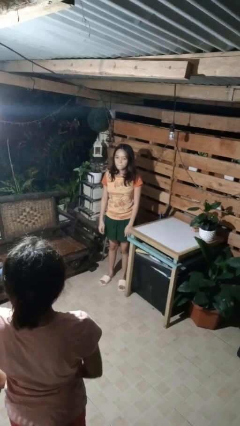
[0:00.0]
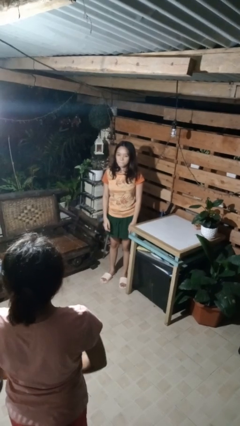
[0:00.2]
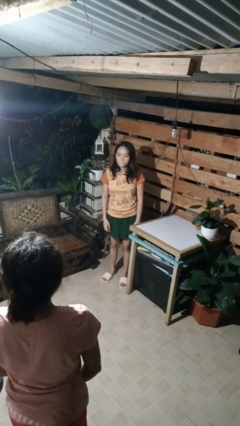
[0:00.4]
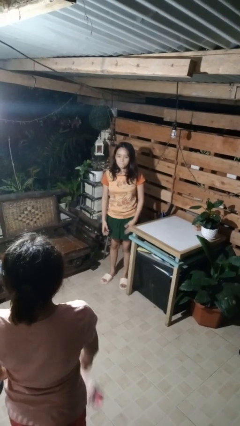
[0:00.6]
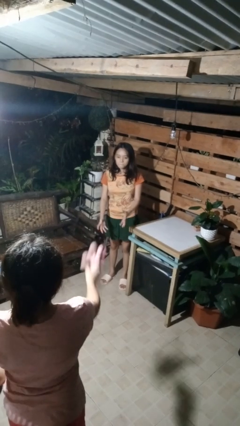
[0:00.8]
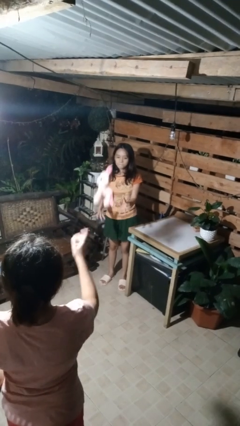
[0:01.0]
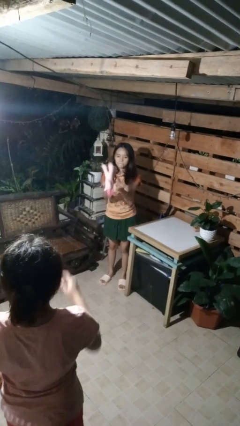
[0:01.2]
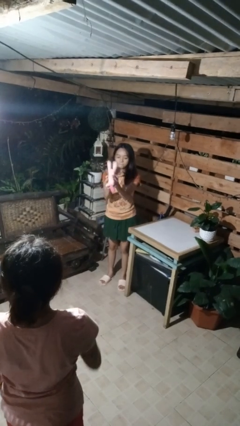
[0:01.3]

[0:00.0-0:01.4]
person catches object from person

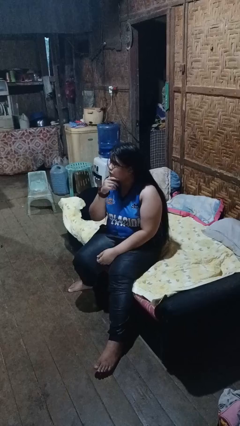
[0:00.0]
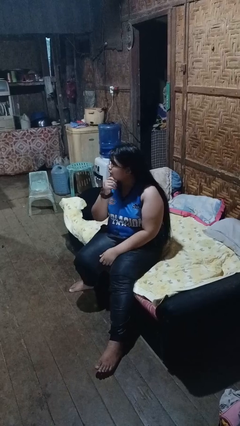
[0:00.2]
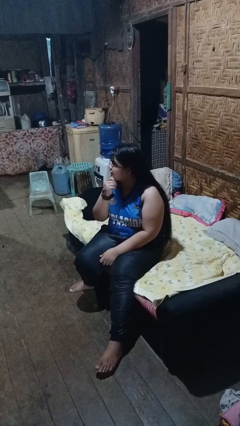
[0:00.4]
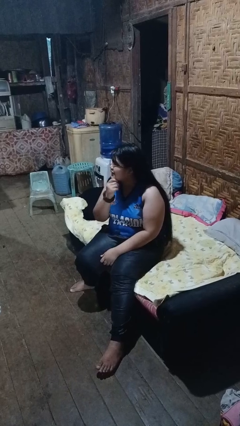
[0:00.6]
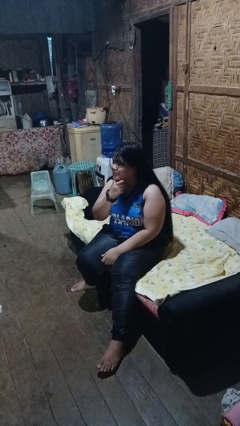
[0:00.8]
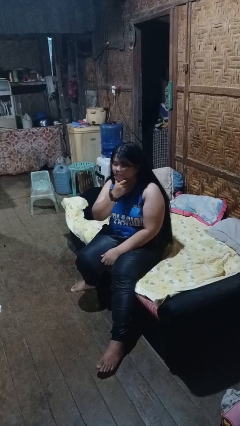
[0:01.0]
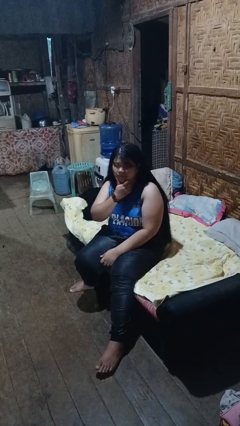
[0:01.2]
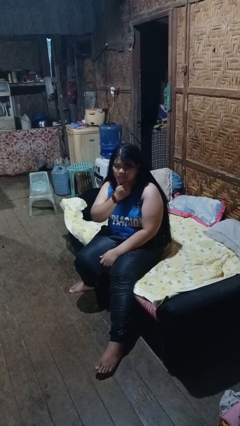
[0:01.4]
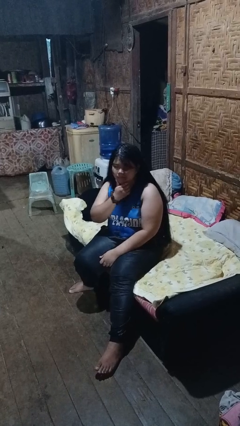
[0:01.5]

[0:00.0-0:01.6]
person strokes chin

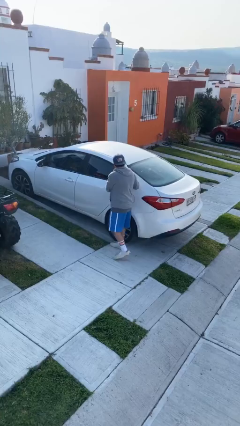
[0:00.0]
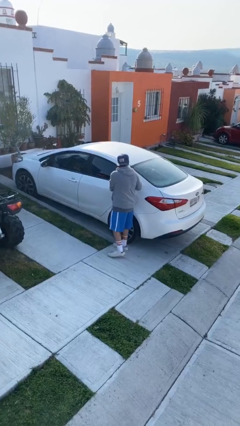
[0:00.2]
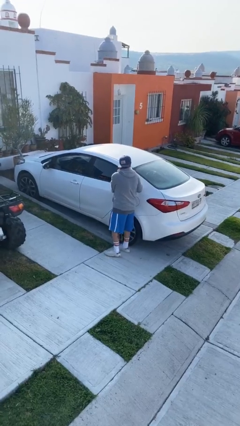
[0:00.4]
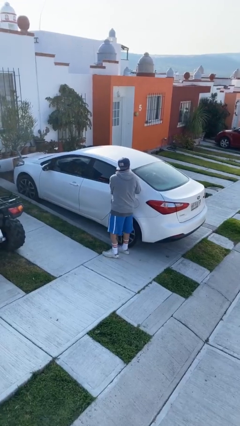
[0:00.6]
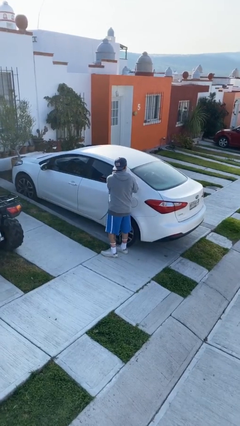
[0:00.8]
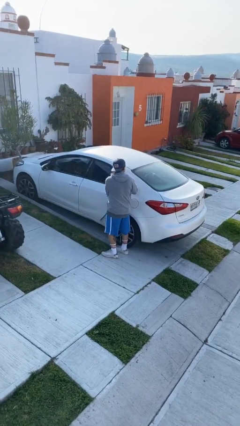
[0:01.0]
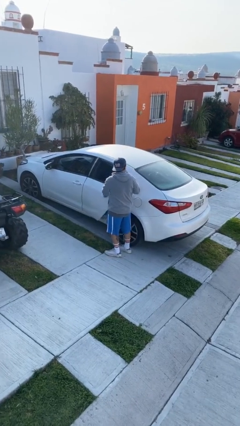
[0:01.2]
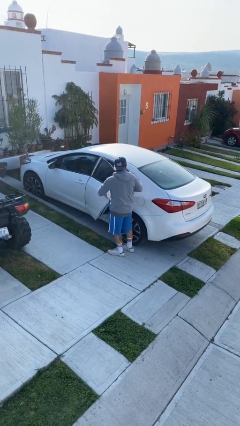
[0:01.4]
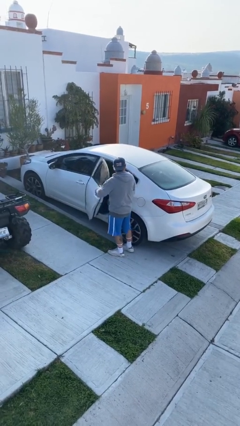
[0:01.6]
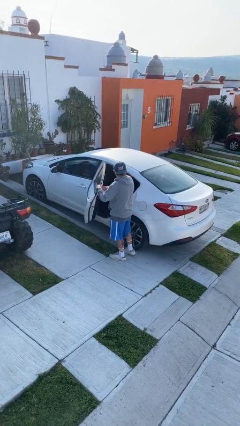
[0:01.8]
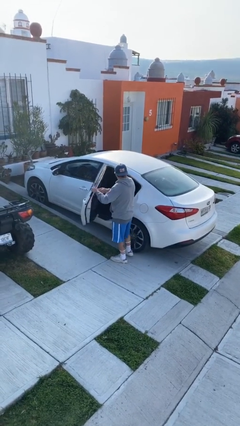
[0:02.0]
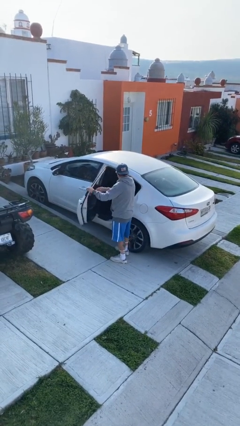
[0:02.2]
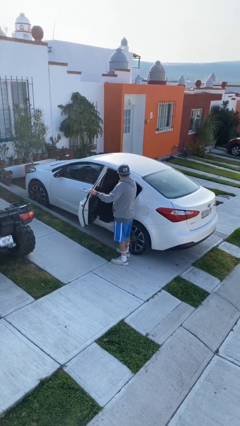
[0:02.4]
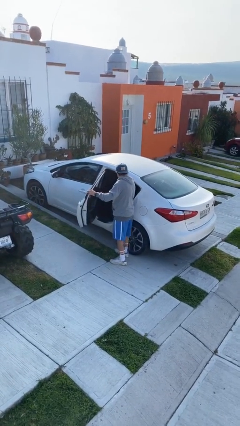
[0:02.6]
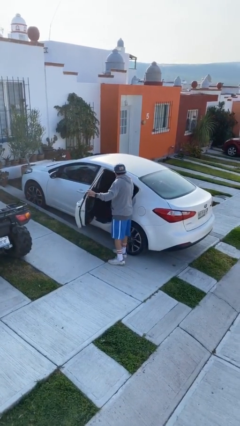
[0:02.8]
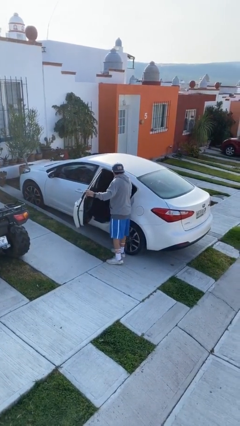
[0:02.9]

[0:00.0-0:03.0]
person opens car door

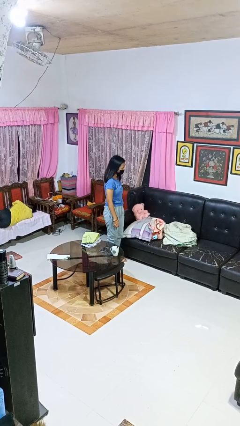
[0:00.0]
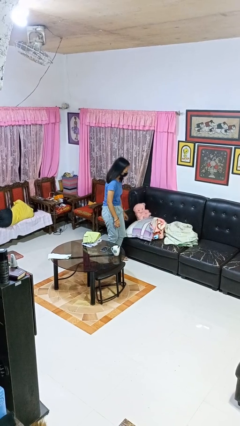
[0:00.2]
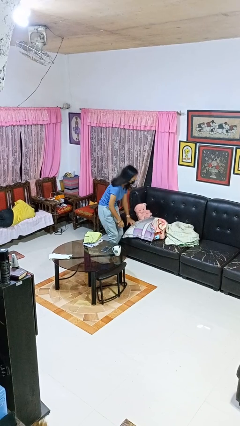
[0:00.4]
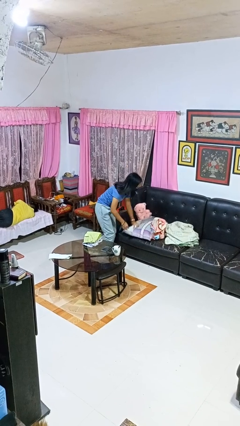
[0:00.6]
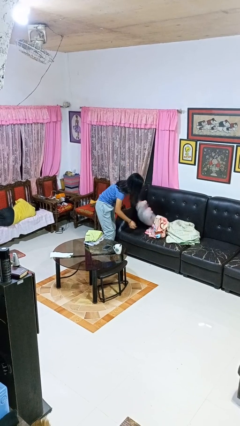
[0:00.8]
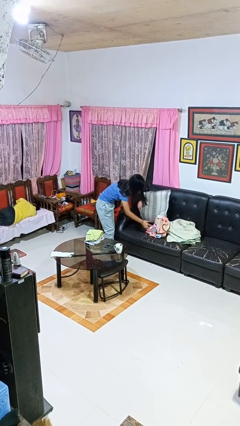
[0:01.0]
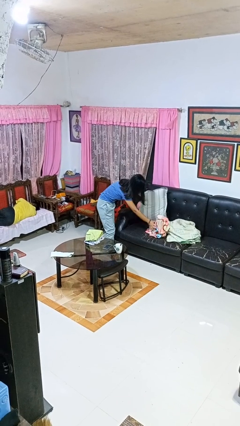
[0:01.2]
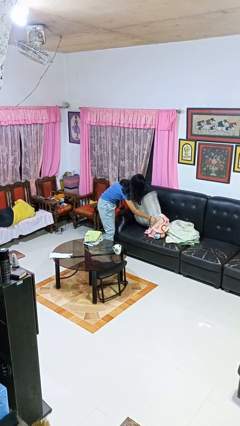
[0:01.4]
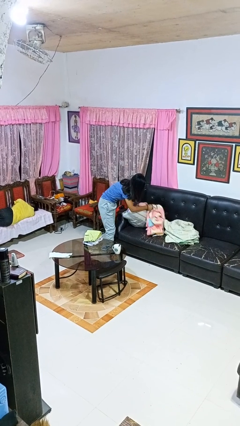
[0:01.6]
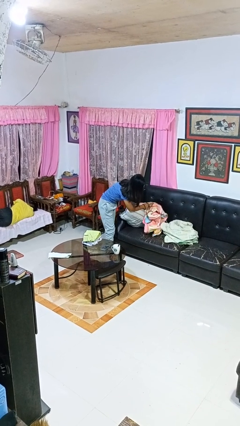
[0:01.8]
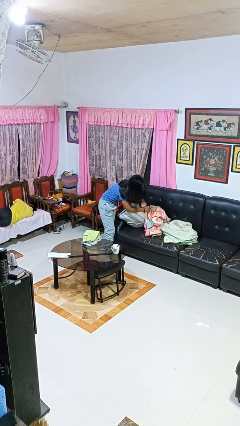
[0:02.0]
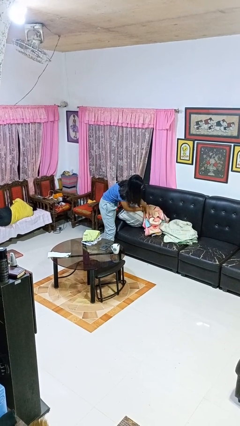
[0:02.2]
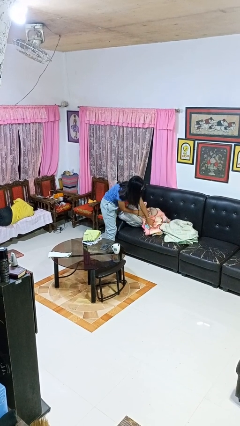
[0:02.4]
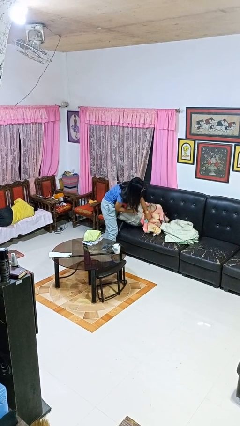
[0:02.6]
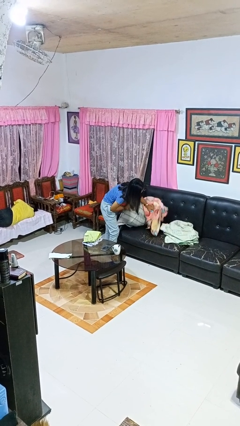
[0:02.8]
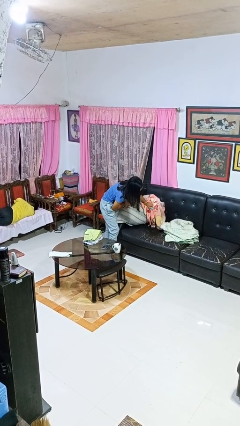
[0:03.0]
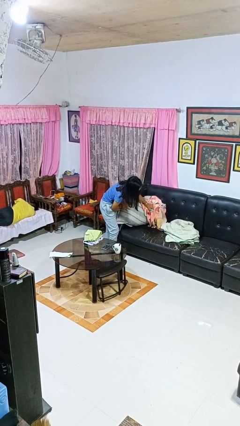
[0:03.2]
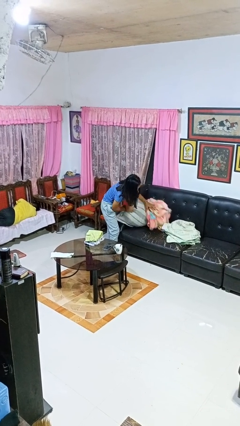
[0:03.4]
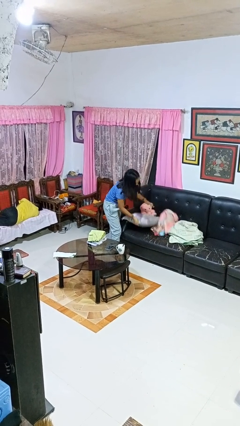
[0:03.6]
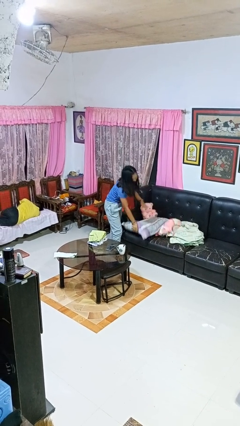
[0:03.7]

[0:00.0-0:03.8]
person searches in couch

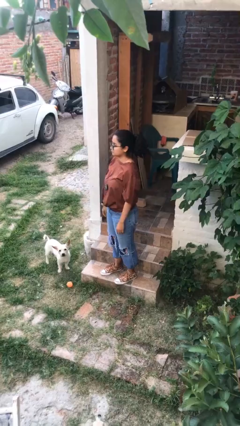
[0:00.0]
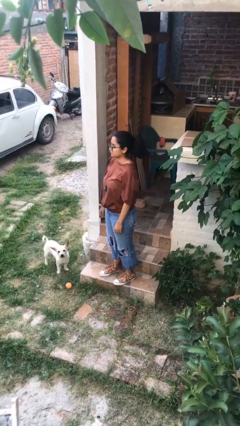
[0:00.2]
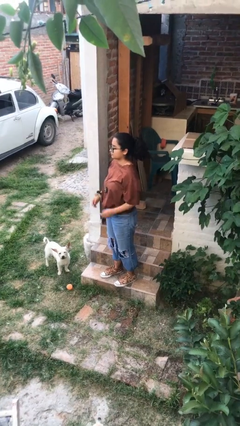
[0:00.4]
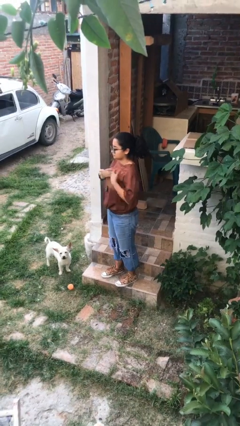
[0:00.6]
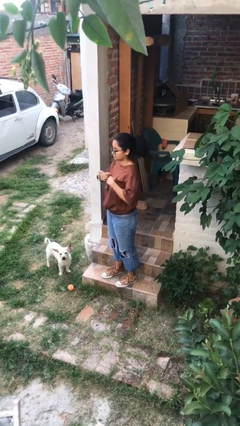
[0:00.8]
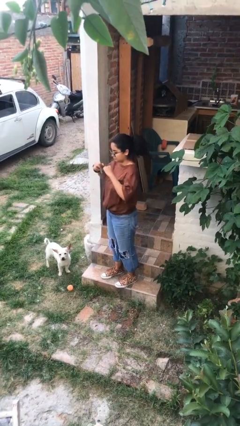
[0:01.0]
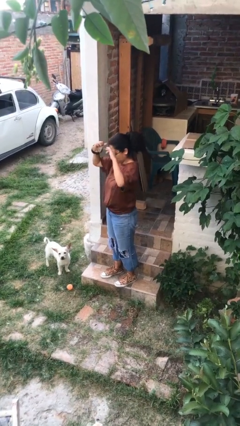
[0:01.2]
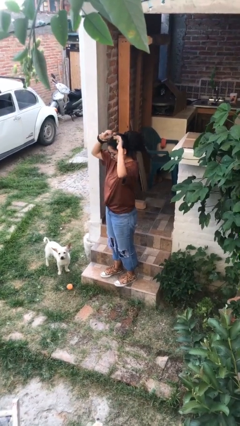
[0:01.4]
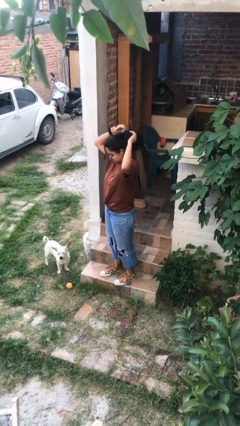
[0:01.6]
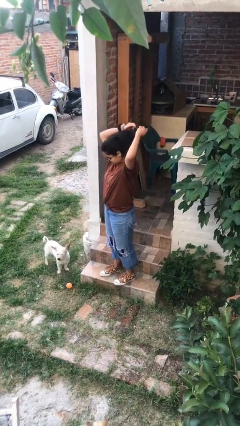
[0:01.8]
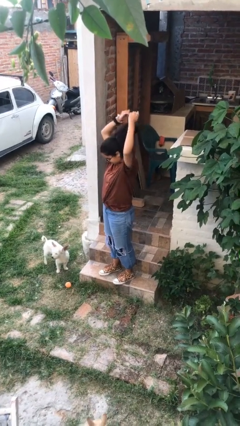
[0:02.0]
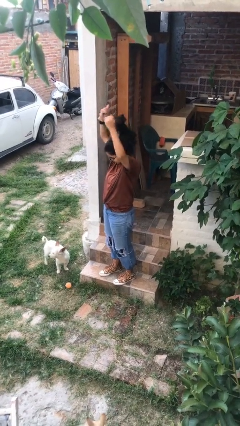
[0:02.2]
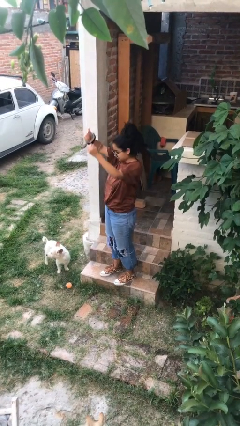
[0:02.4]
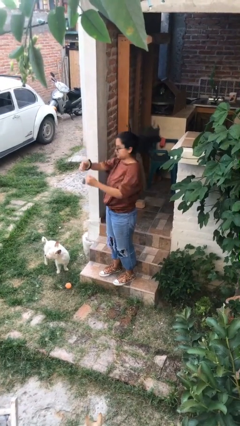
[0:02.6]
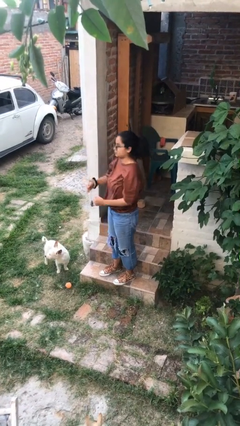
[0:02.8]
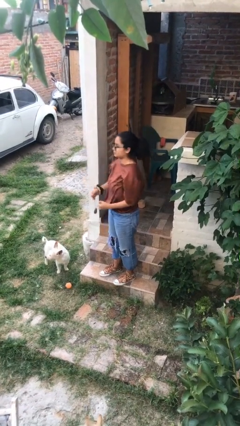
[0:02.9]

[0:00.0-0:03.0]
person takes off necklace

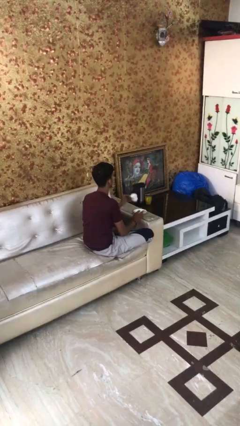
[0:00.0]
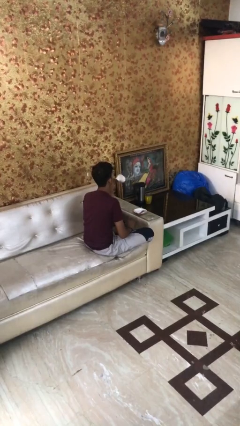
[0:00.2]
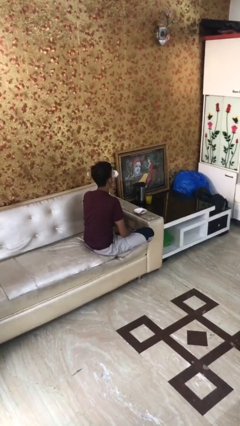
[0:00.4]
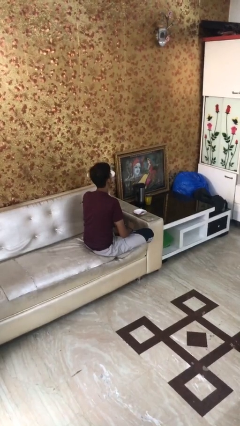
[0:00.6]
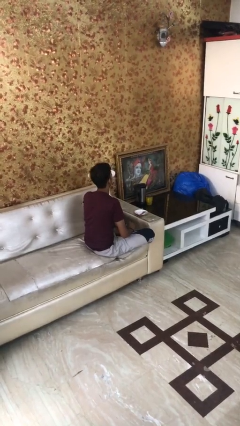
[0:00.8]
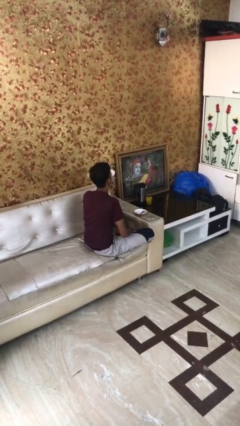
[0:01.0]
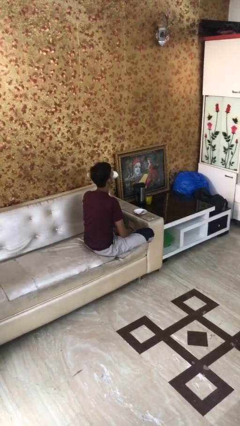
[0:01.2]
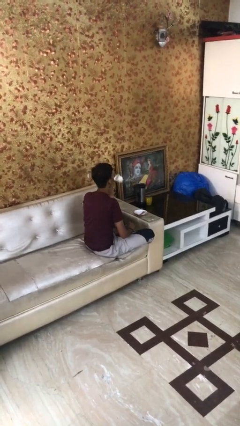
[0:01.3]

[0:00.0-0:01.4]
person drinks from mug

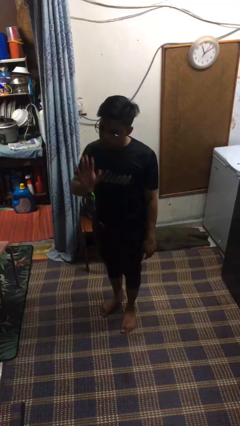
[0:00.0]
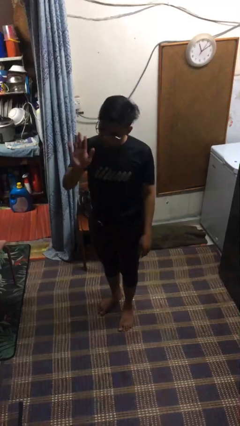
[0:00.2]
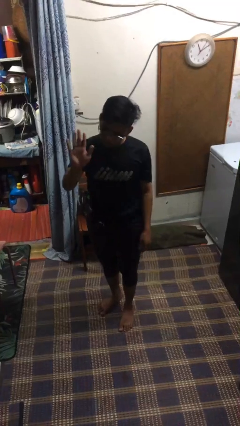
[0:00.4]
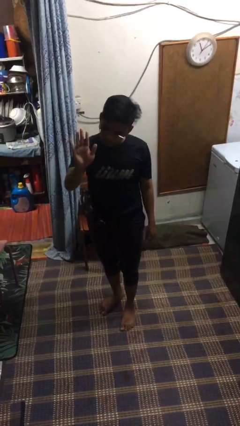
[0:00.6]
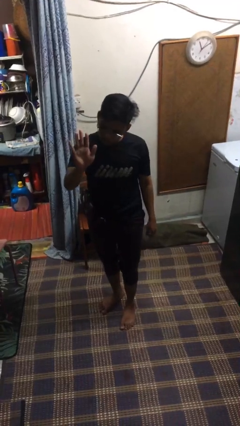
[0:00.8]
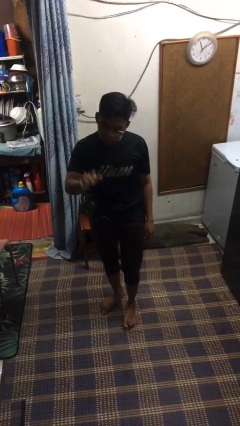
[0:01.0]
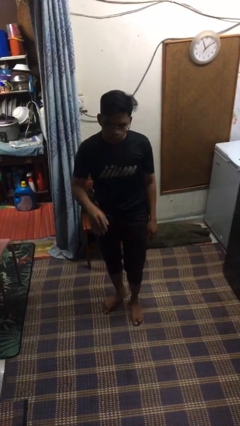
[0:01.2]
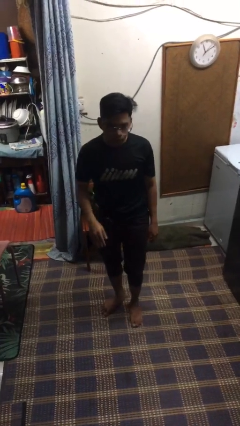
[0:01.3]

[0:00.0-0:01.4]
person gestures stop

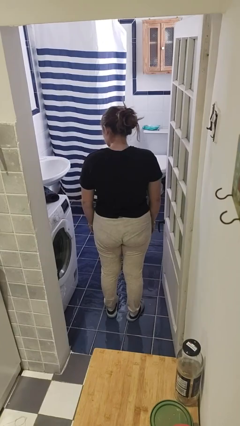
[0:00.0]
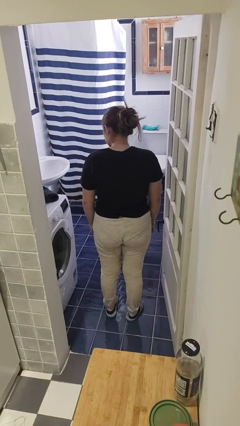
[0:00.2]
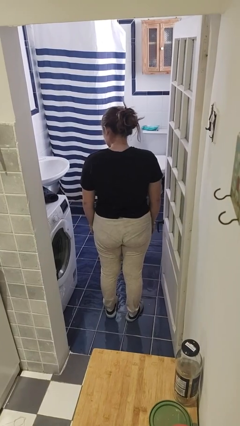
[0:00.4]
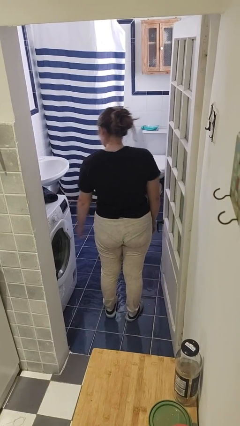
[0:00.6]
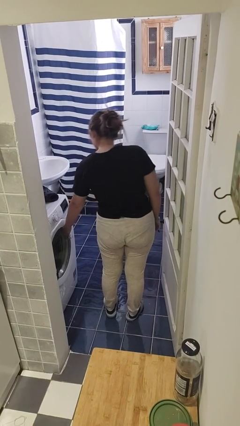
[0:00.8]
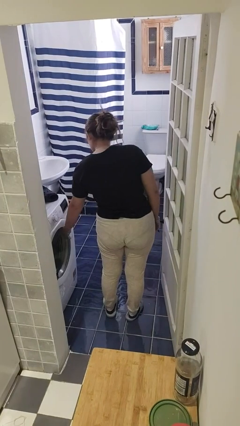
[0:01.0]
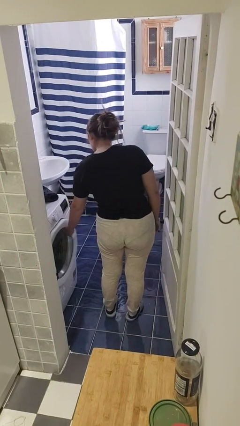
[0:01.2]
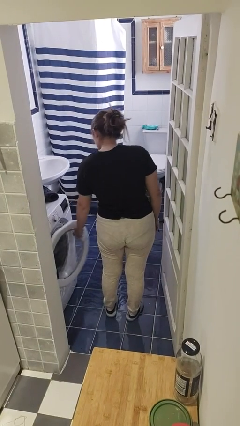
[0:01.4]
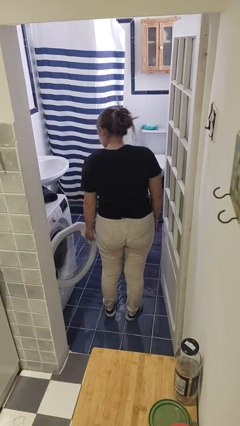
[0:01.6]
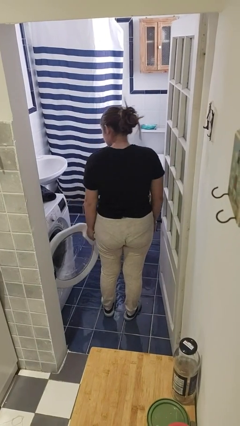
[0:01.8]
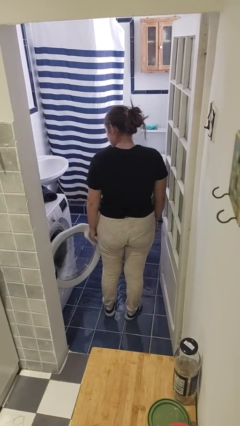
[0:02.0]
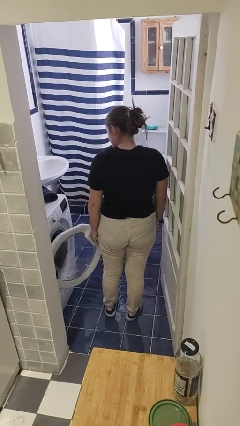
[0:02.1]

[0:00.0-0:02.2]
person opens clothes washer
